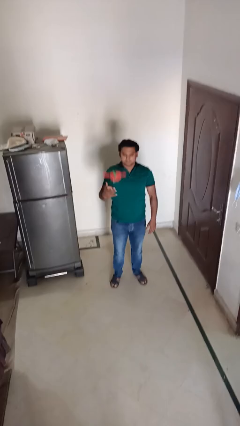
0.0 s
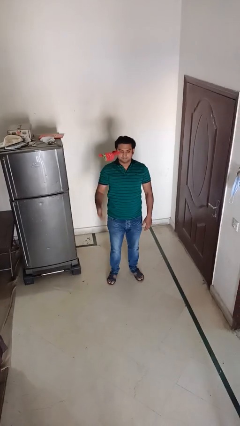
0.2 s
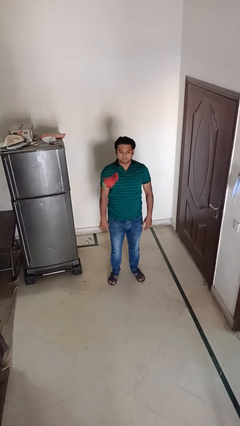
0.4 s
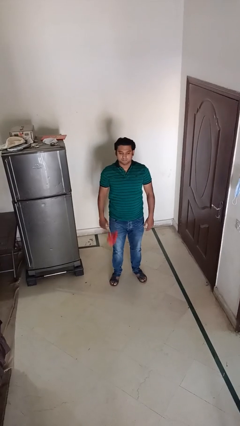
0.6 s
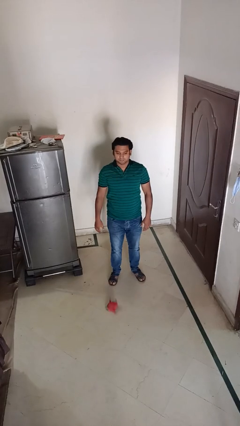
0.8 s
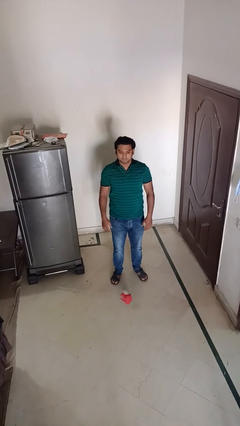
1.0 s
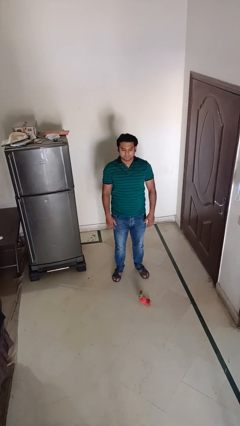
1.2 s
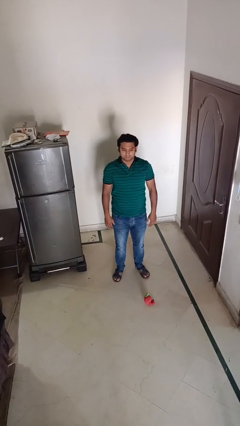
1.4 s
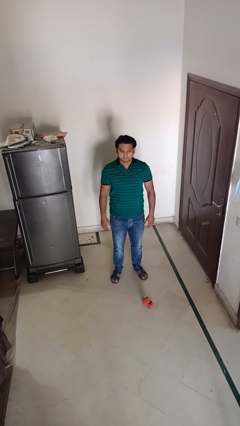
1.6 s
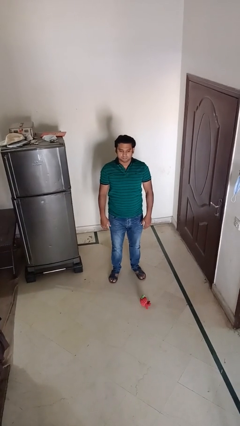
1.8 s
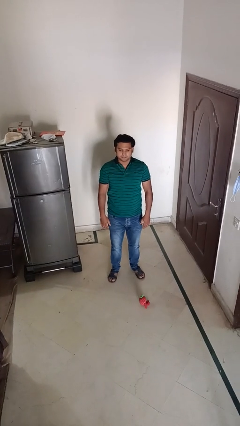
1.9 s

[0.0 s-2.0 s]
person throws object into air

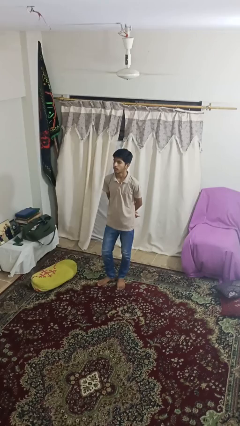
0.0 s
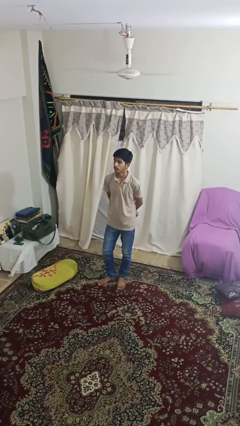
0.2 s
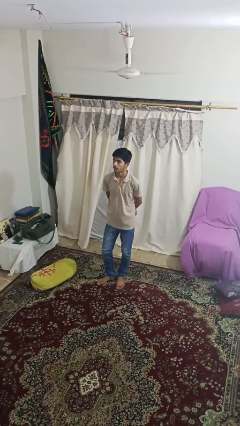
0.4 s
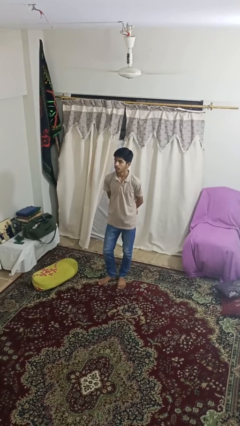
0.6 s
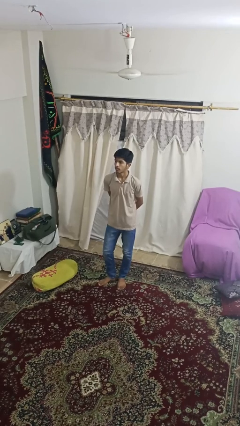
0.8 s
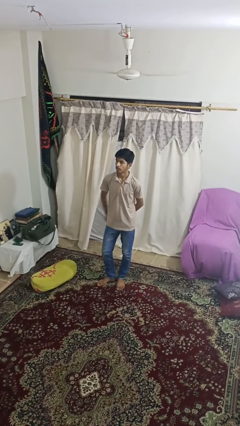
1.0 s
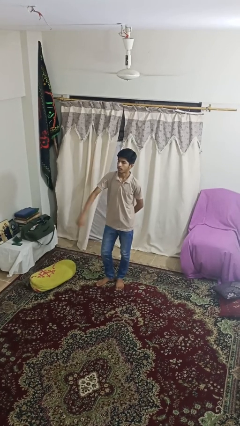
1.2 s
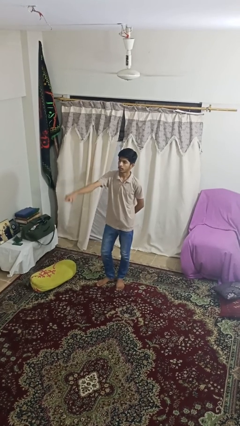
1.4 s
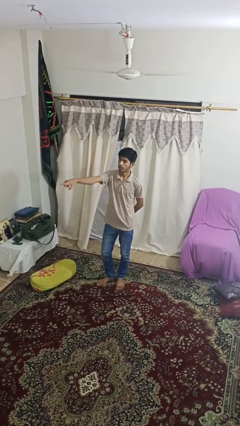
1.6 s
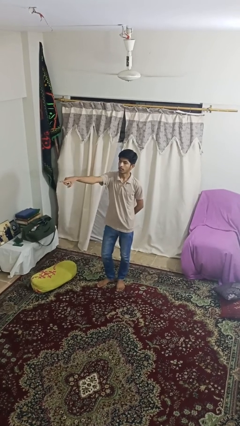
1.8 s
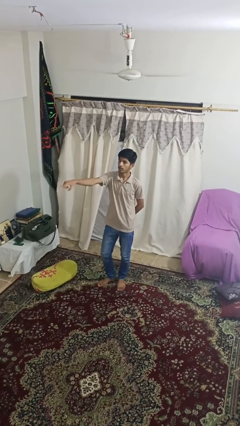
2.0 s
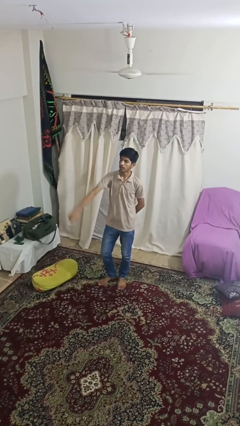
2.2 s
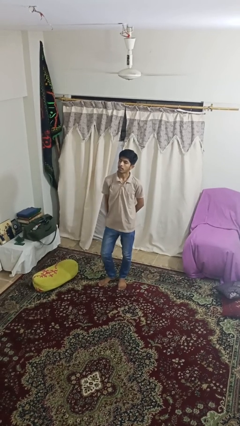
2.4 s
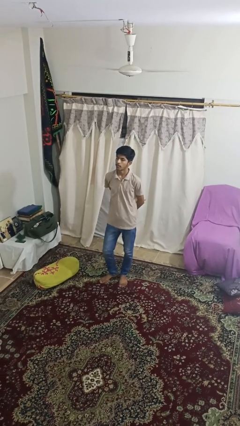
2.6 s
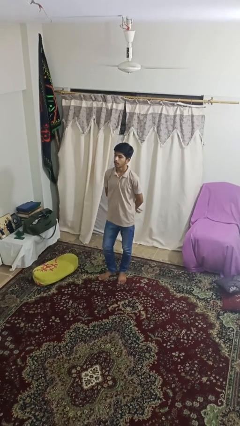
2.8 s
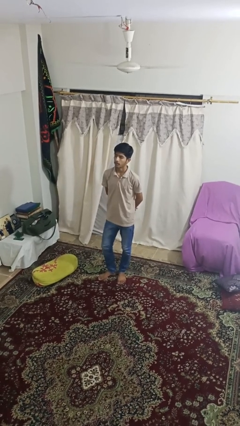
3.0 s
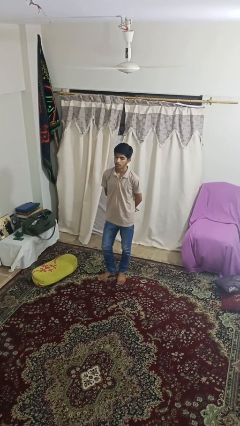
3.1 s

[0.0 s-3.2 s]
person points at person

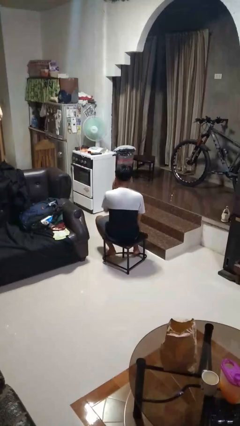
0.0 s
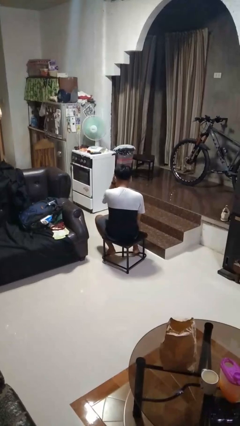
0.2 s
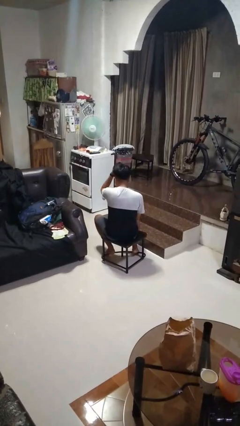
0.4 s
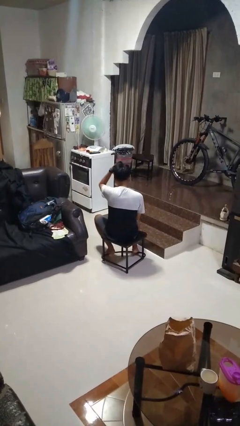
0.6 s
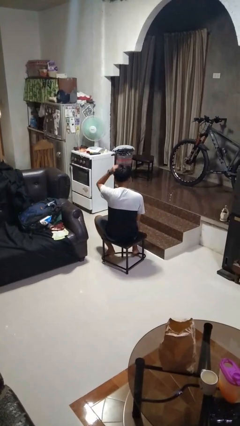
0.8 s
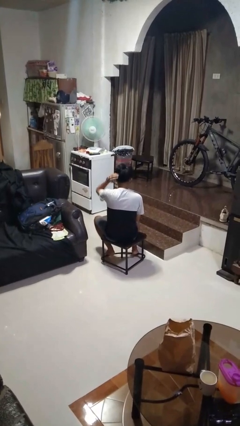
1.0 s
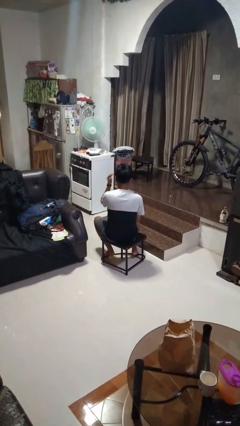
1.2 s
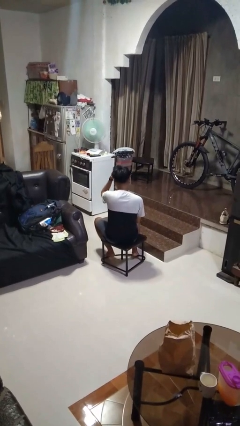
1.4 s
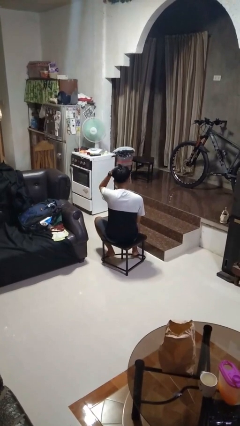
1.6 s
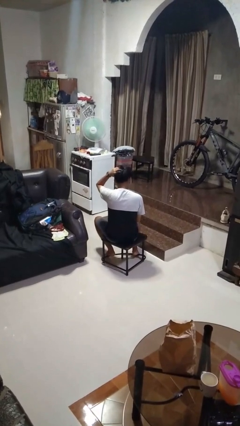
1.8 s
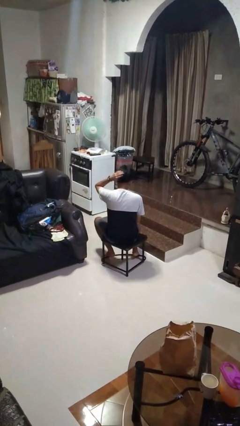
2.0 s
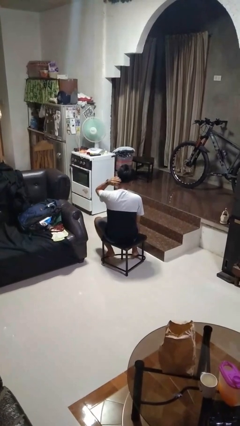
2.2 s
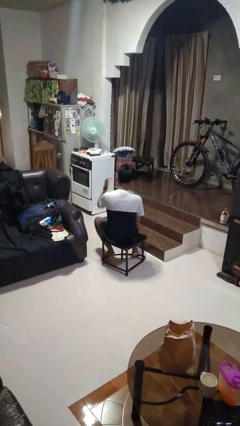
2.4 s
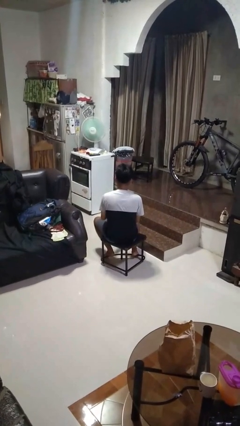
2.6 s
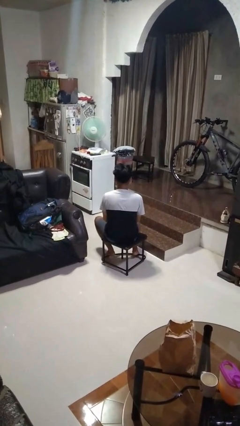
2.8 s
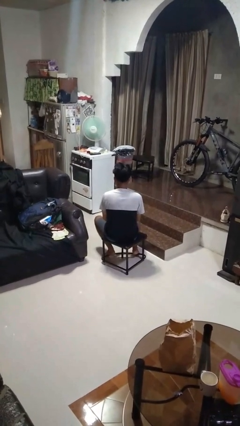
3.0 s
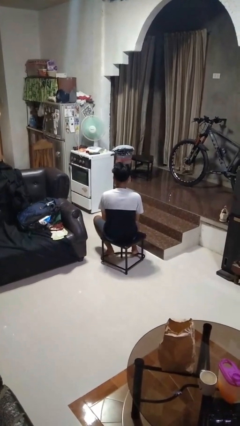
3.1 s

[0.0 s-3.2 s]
person strokes hair

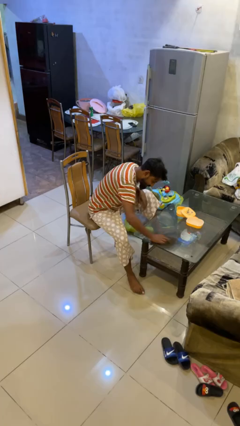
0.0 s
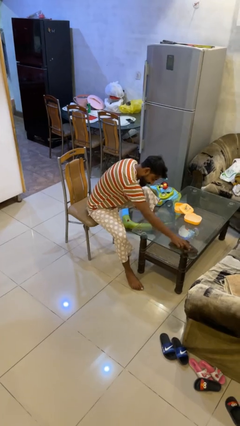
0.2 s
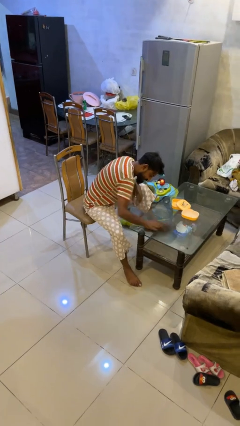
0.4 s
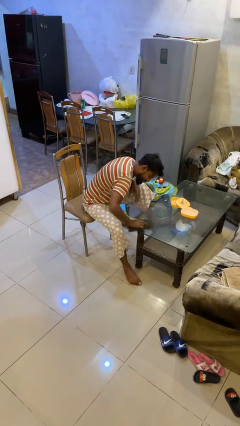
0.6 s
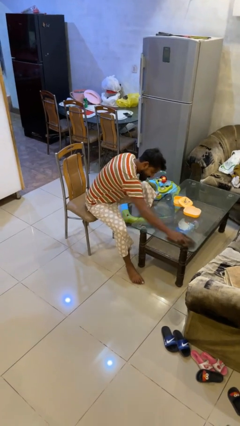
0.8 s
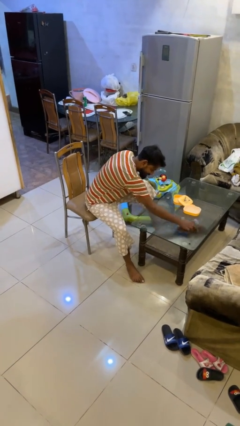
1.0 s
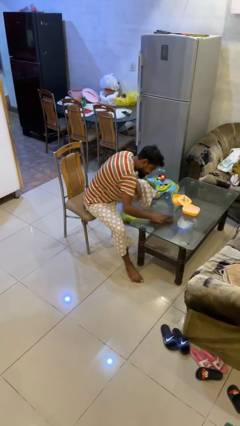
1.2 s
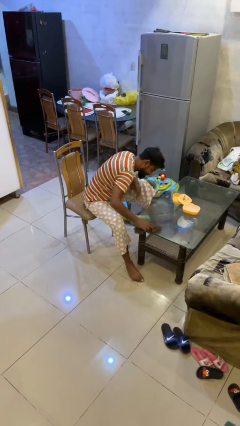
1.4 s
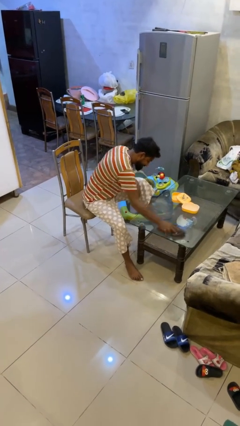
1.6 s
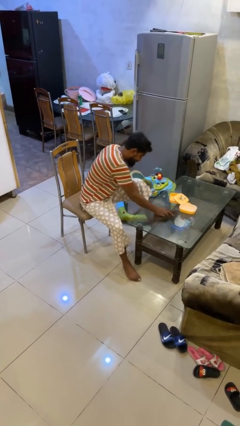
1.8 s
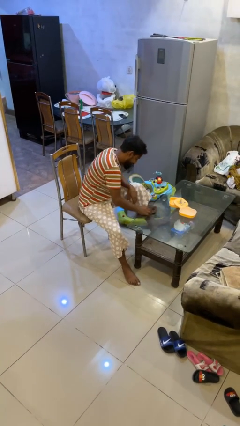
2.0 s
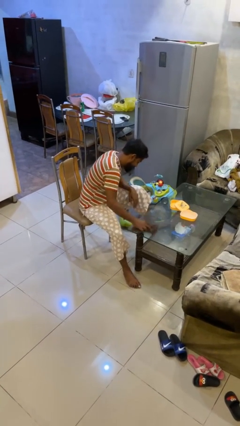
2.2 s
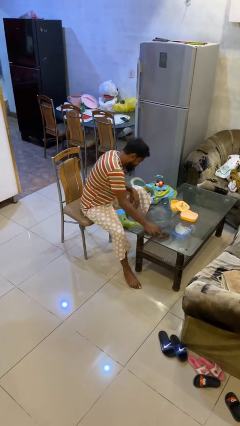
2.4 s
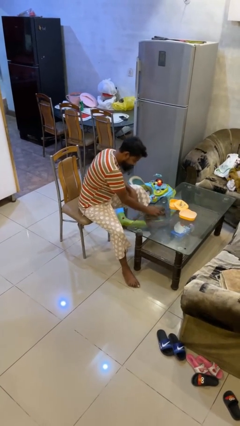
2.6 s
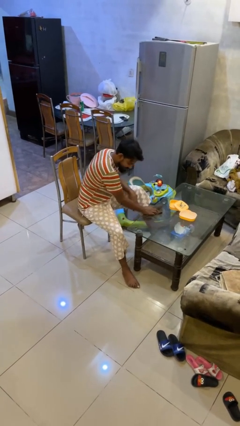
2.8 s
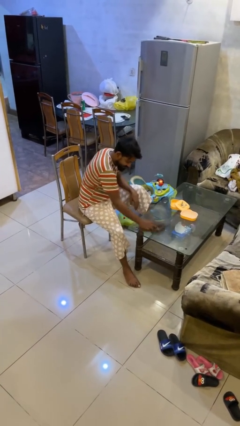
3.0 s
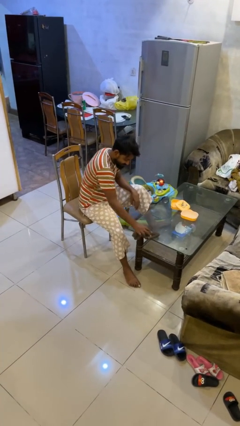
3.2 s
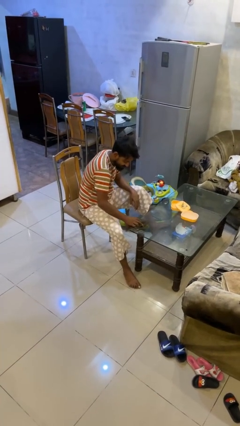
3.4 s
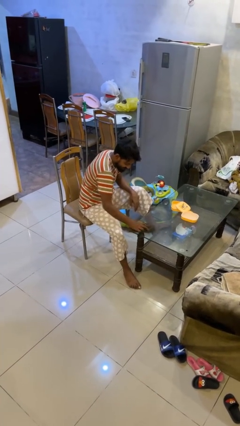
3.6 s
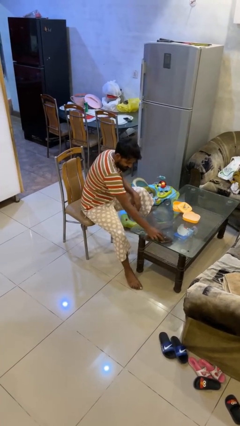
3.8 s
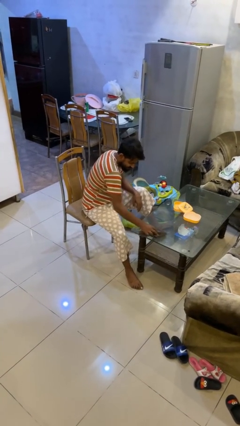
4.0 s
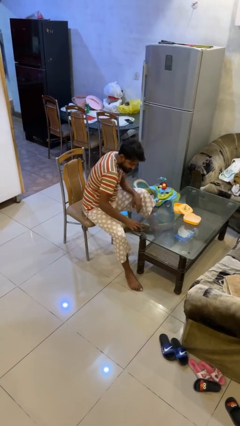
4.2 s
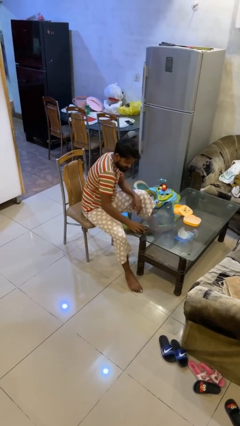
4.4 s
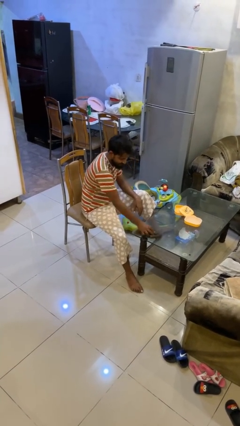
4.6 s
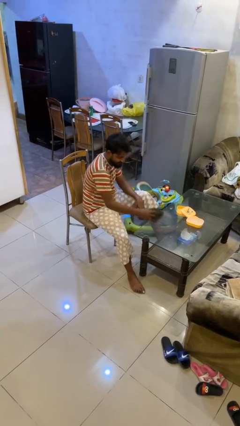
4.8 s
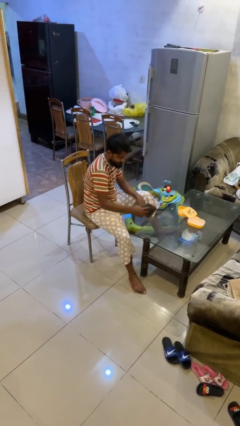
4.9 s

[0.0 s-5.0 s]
person cleans table with rag

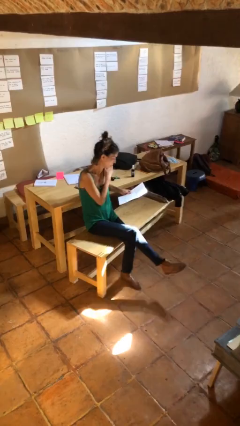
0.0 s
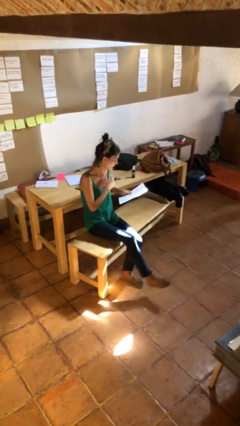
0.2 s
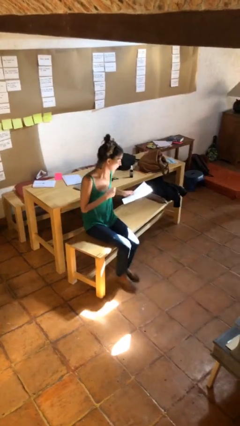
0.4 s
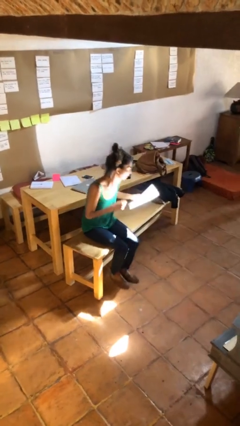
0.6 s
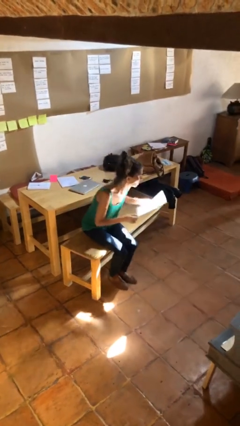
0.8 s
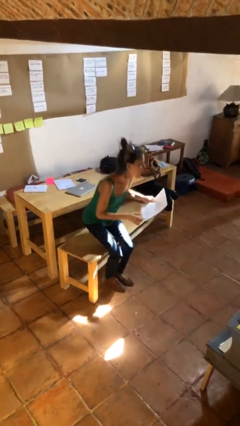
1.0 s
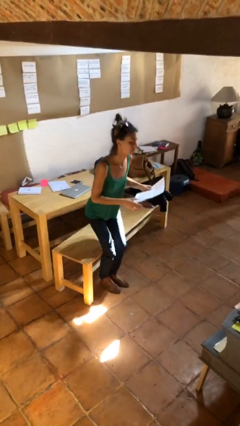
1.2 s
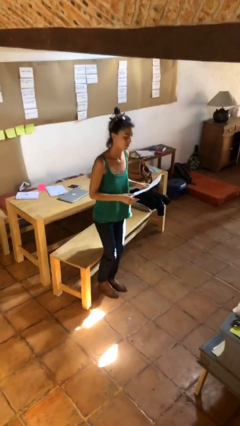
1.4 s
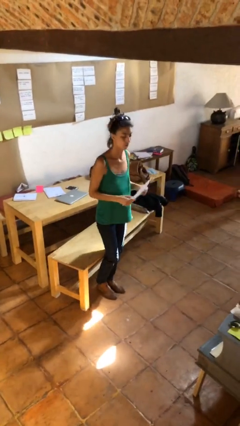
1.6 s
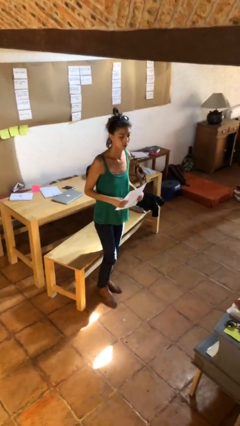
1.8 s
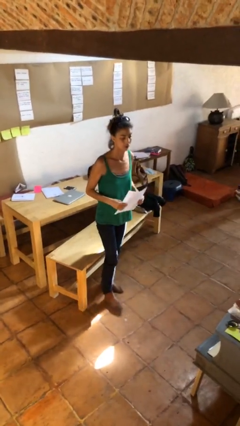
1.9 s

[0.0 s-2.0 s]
person stands up

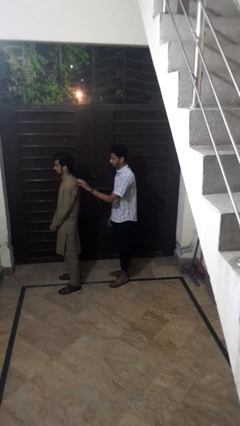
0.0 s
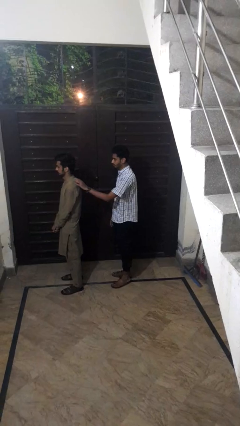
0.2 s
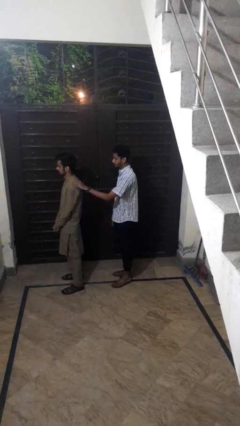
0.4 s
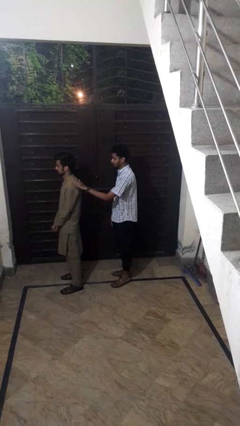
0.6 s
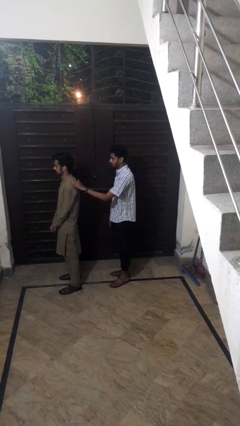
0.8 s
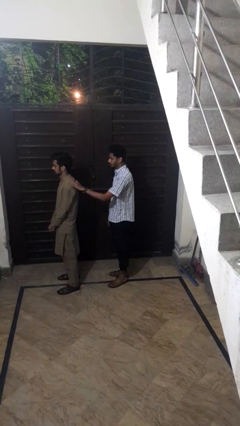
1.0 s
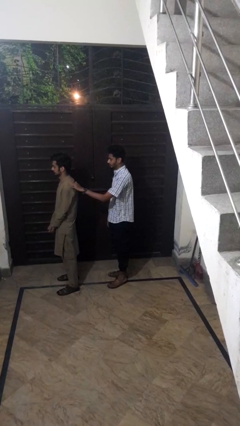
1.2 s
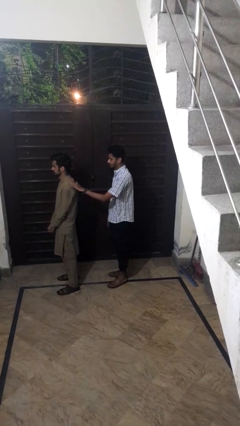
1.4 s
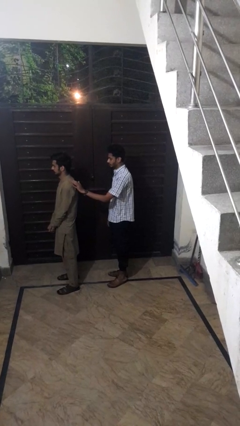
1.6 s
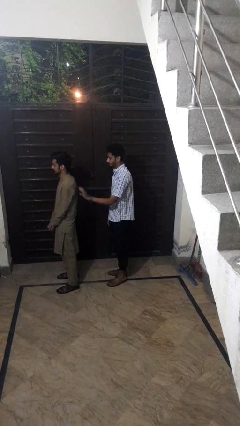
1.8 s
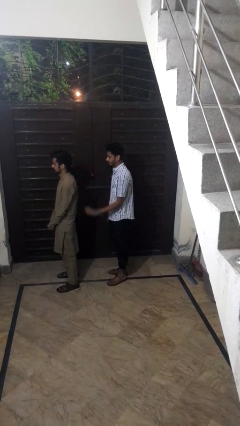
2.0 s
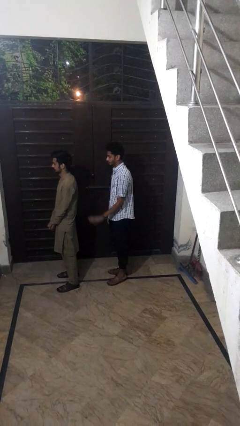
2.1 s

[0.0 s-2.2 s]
person touches back of person
